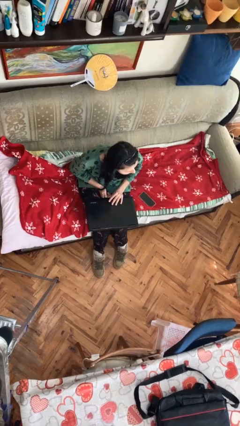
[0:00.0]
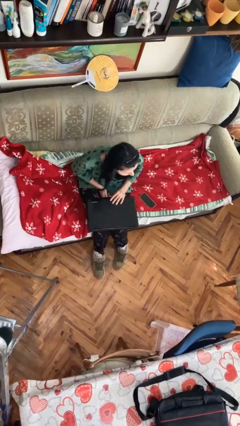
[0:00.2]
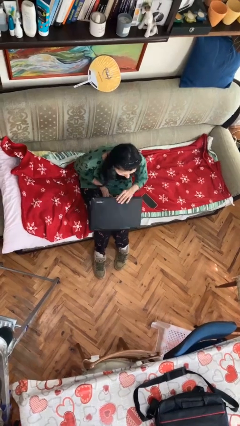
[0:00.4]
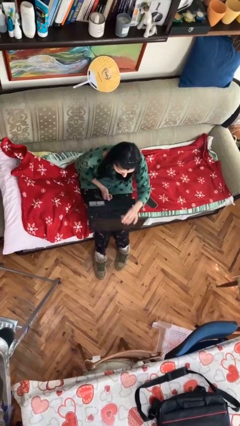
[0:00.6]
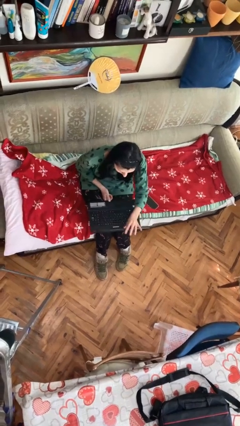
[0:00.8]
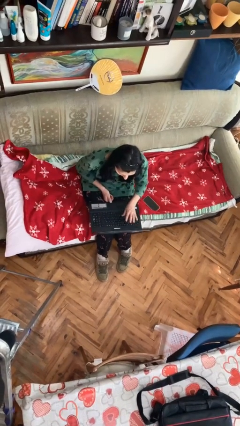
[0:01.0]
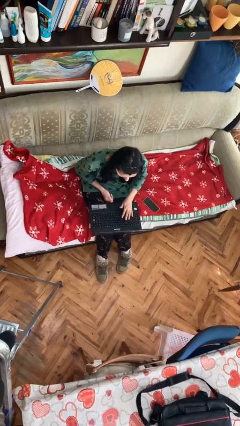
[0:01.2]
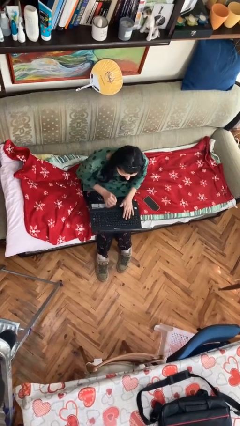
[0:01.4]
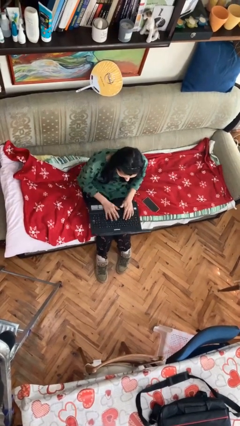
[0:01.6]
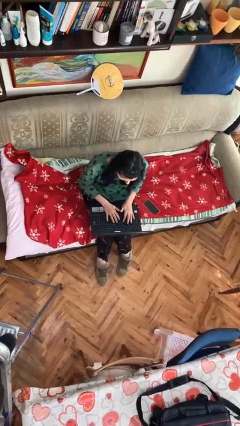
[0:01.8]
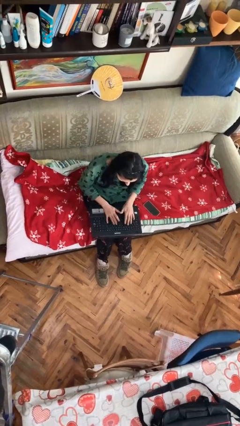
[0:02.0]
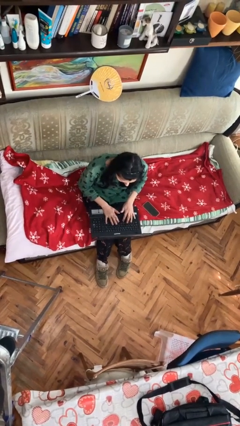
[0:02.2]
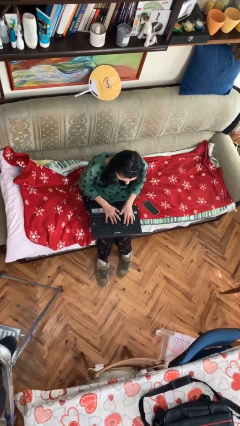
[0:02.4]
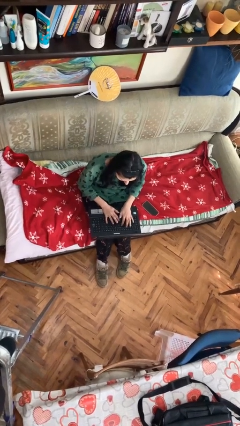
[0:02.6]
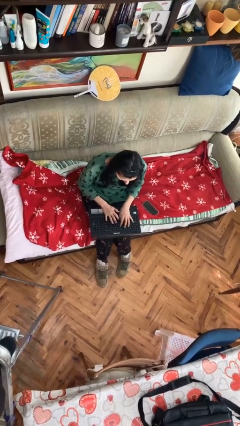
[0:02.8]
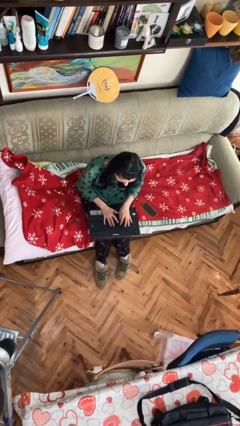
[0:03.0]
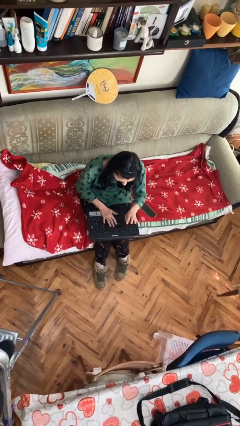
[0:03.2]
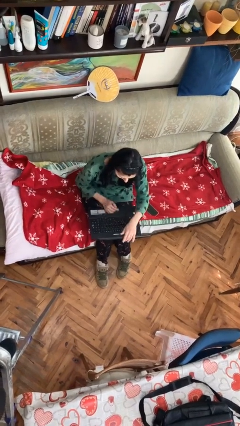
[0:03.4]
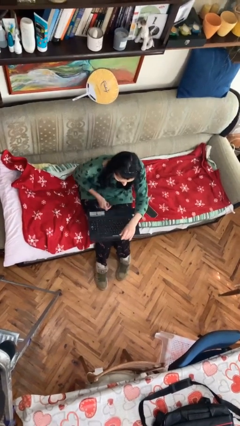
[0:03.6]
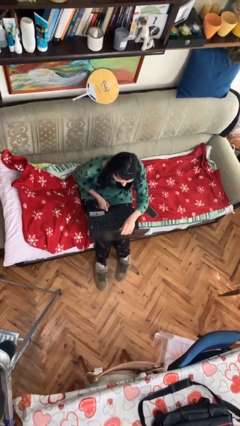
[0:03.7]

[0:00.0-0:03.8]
person interacts with laptop

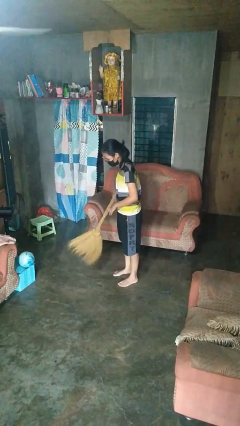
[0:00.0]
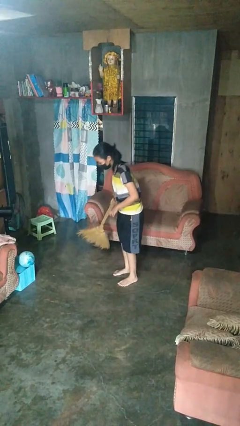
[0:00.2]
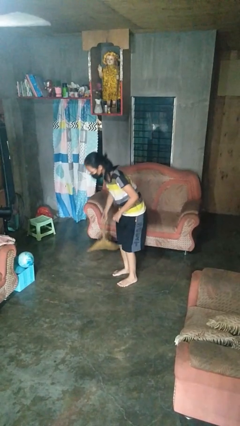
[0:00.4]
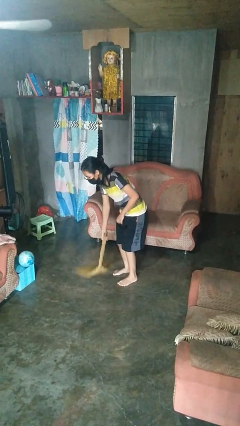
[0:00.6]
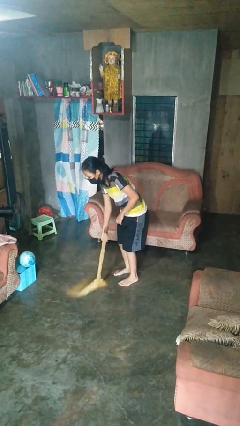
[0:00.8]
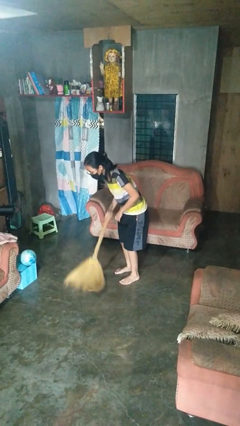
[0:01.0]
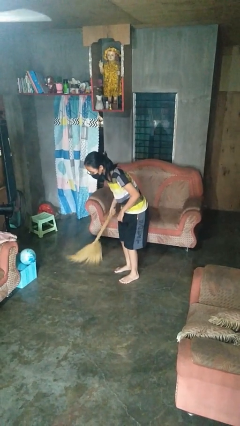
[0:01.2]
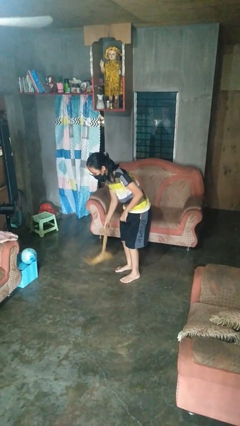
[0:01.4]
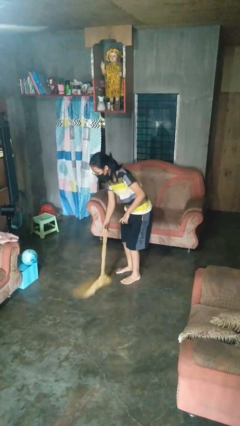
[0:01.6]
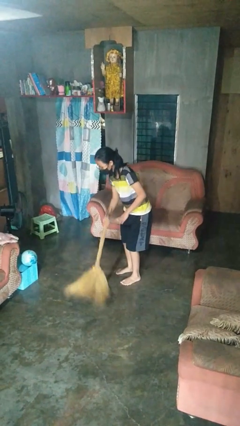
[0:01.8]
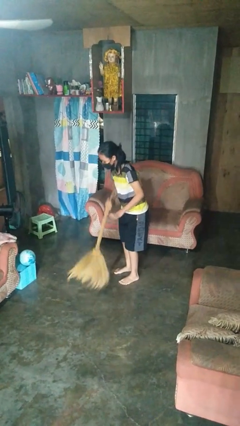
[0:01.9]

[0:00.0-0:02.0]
person sweeps floor

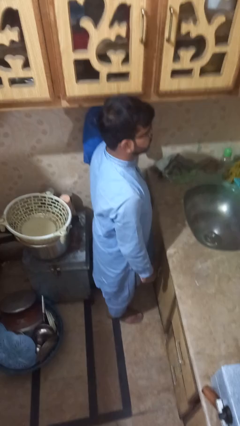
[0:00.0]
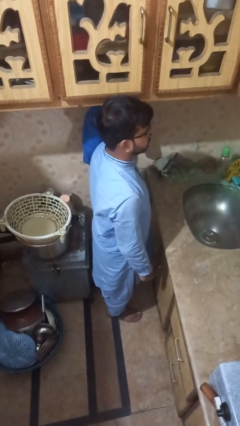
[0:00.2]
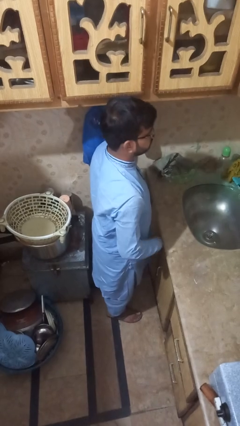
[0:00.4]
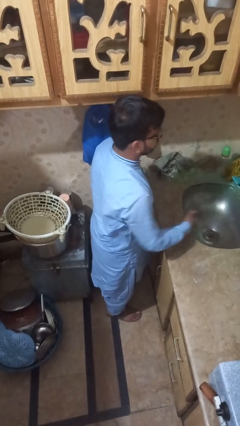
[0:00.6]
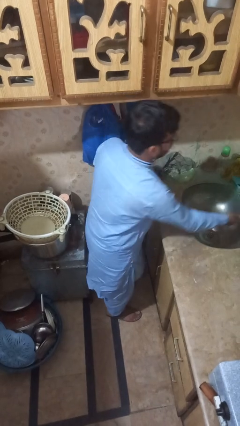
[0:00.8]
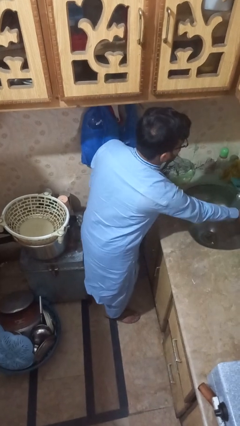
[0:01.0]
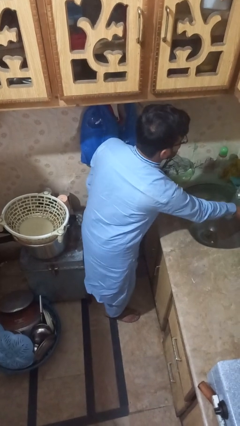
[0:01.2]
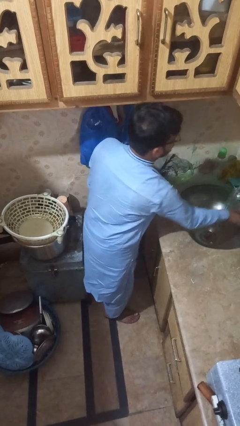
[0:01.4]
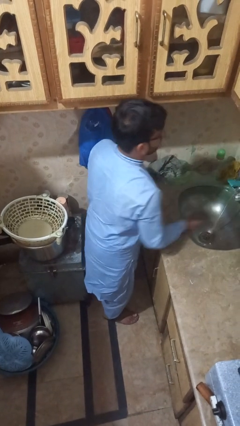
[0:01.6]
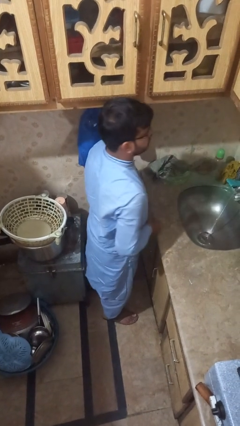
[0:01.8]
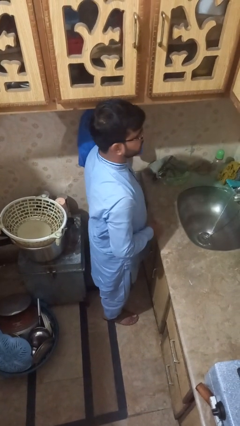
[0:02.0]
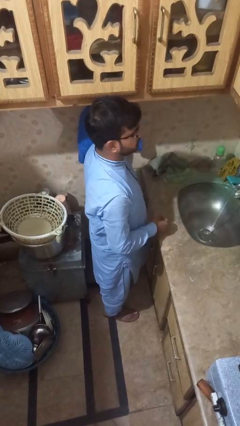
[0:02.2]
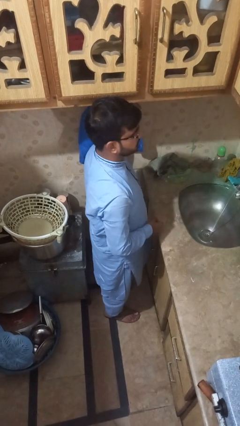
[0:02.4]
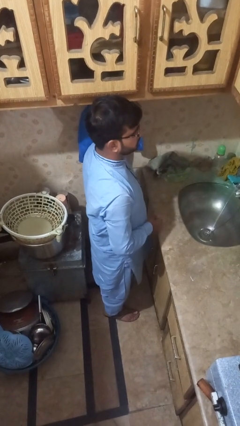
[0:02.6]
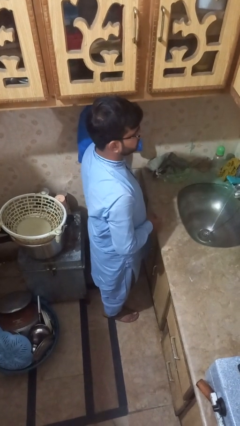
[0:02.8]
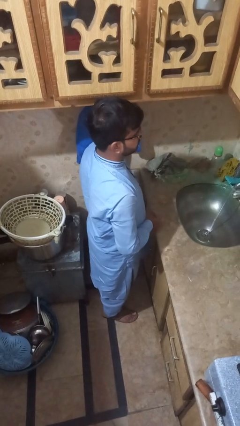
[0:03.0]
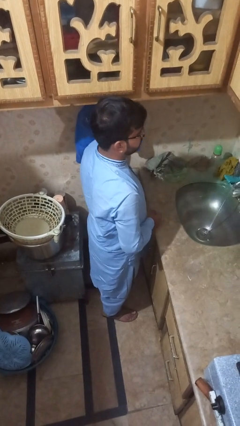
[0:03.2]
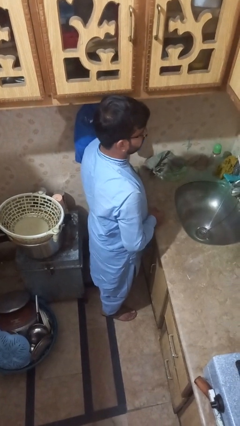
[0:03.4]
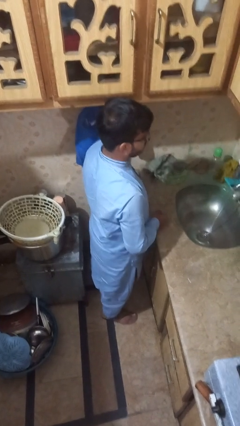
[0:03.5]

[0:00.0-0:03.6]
person turns on faucet

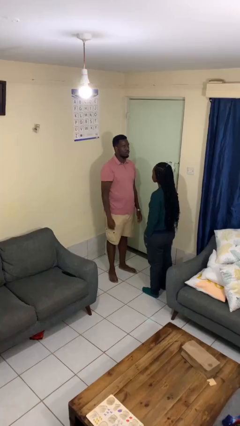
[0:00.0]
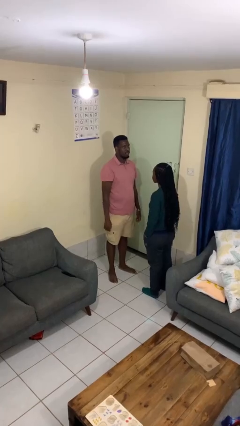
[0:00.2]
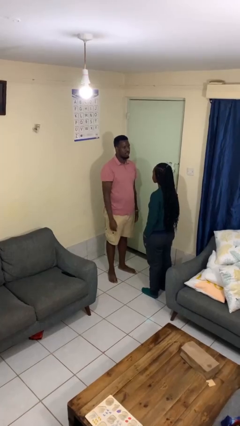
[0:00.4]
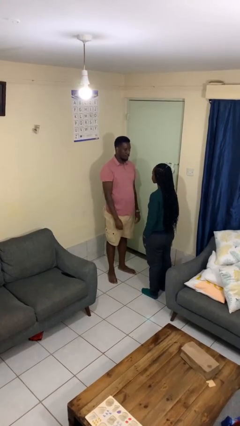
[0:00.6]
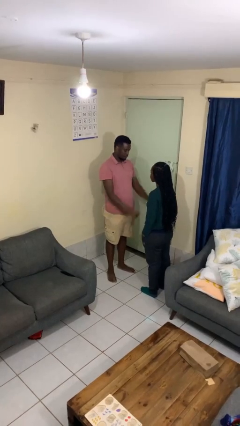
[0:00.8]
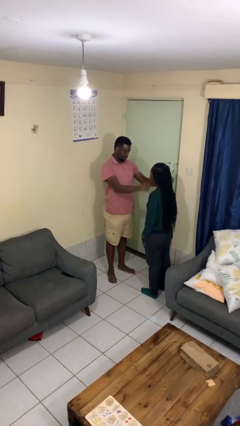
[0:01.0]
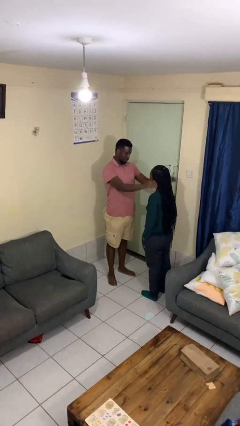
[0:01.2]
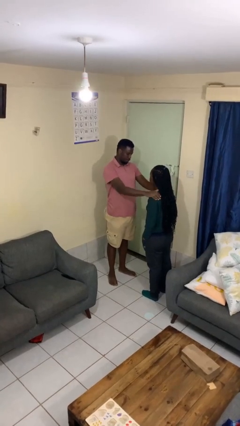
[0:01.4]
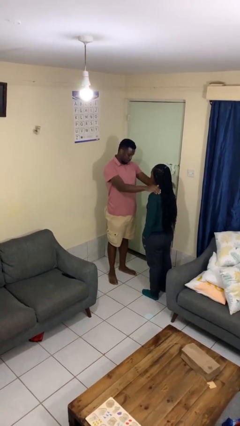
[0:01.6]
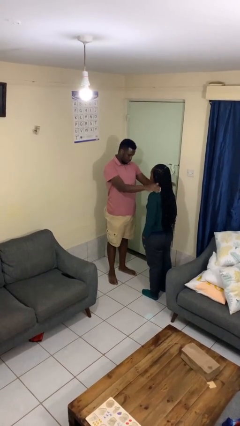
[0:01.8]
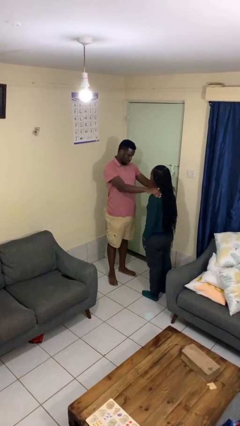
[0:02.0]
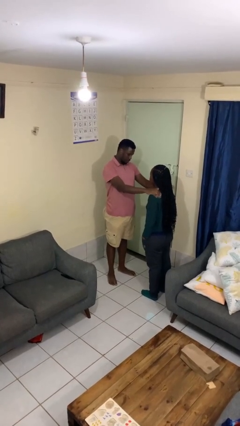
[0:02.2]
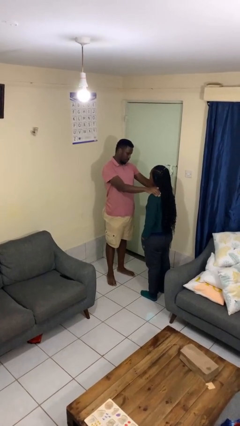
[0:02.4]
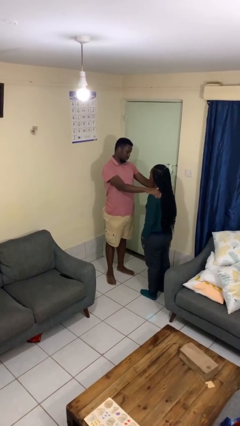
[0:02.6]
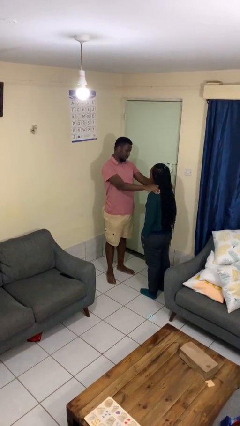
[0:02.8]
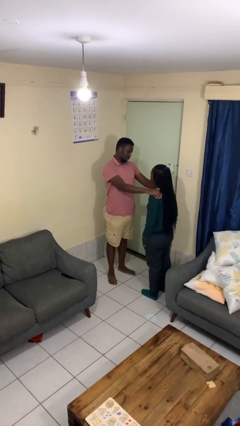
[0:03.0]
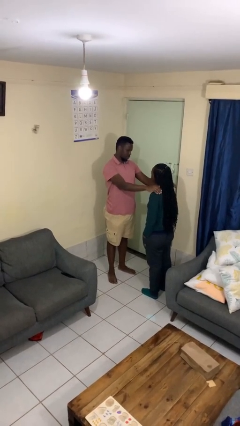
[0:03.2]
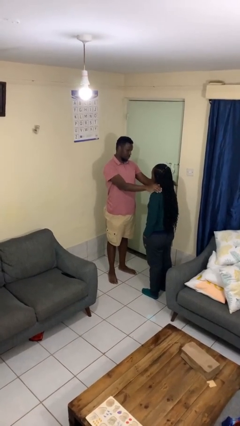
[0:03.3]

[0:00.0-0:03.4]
person pounds shoulders of person

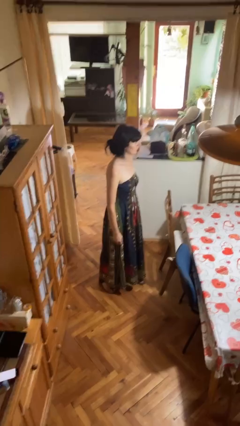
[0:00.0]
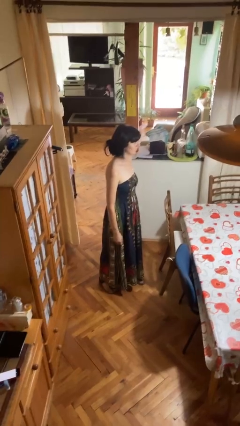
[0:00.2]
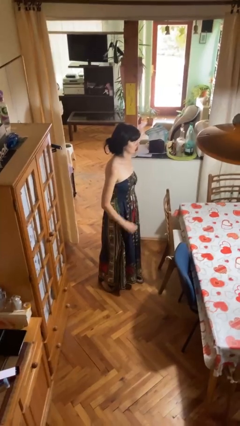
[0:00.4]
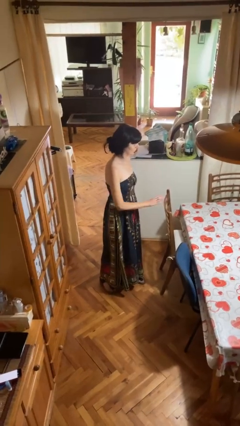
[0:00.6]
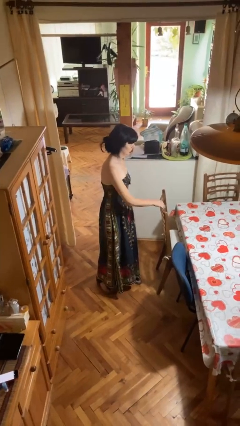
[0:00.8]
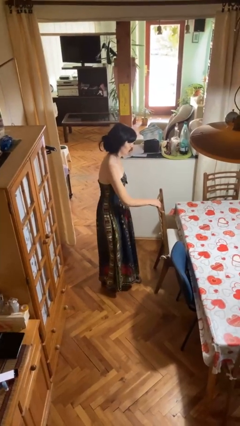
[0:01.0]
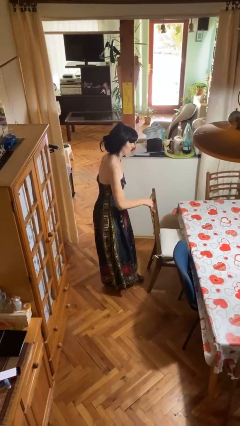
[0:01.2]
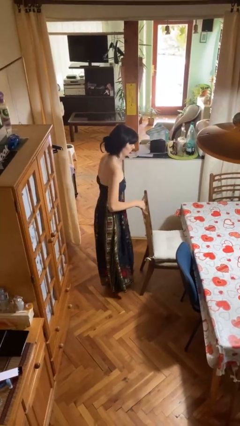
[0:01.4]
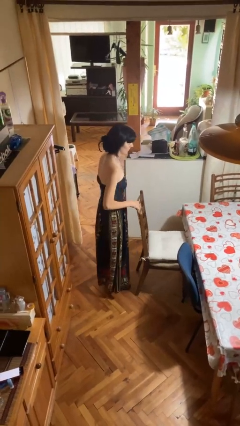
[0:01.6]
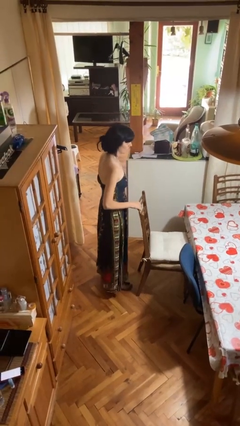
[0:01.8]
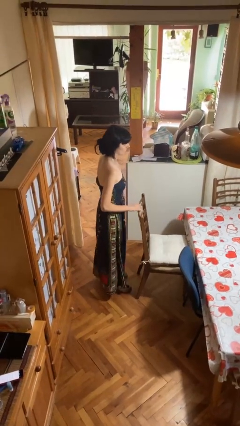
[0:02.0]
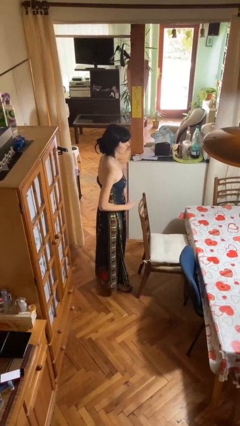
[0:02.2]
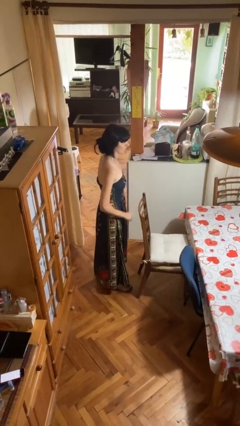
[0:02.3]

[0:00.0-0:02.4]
person pulls out chair

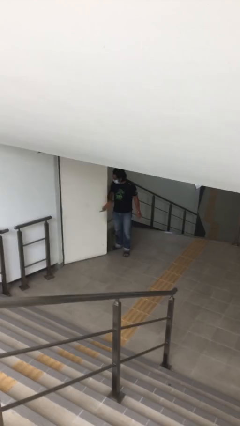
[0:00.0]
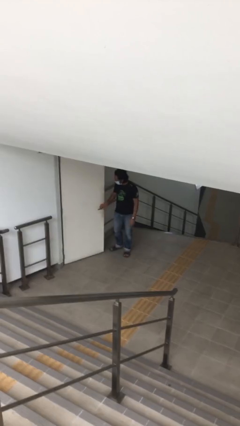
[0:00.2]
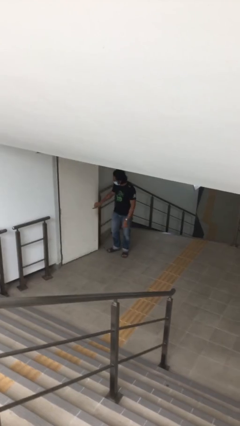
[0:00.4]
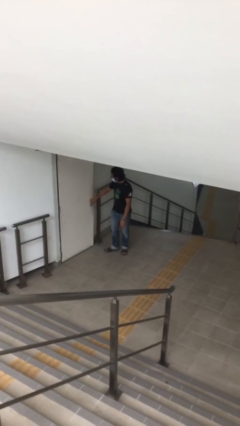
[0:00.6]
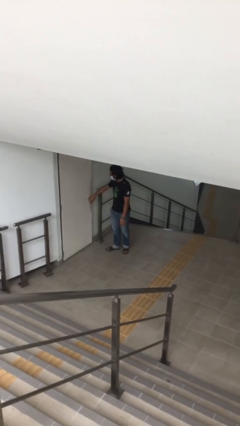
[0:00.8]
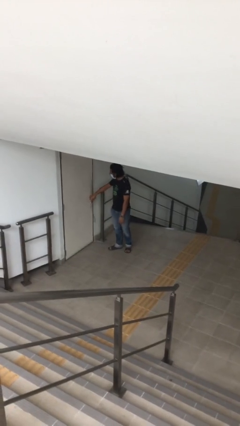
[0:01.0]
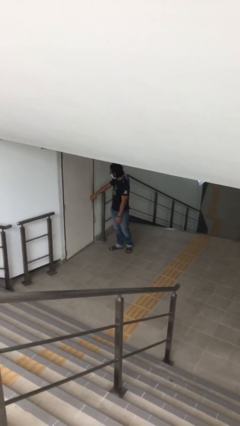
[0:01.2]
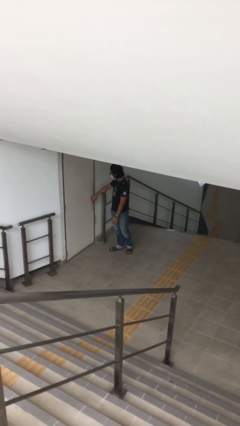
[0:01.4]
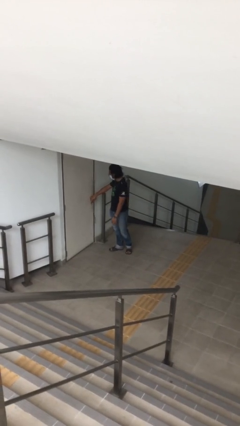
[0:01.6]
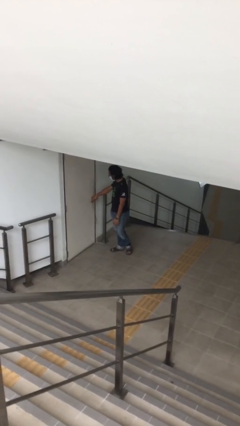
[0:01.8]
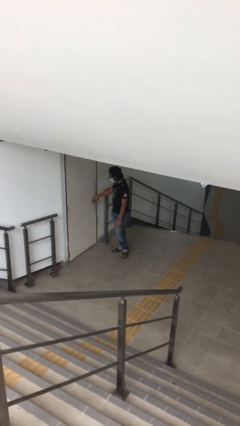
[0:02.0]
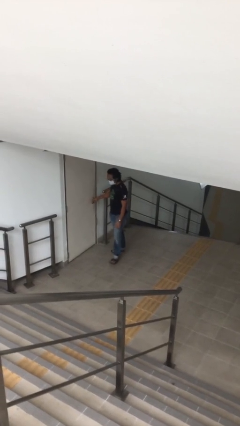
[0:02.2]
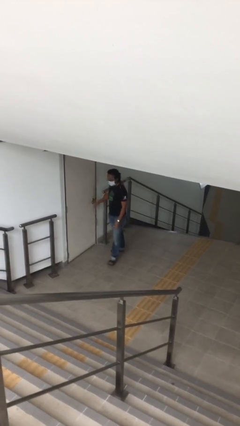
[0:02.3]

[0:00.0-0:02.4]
person closes facility door
